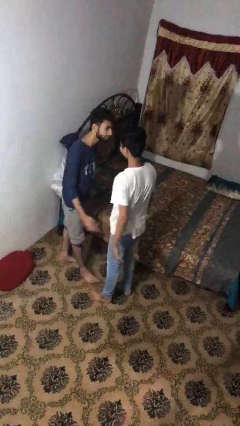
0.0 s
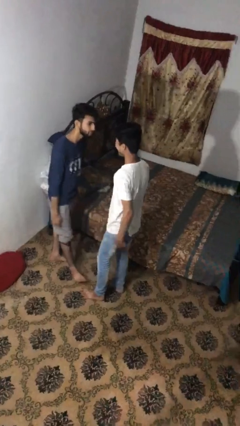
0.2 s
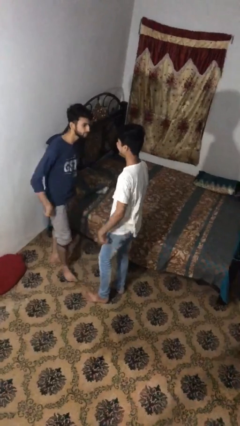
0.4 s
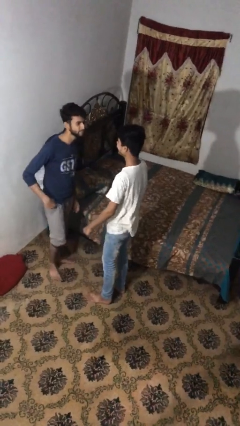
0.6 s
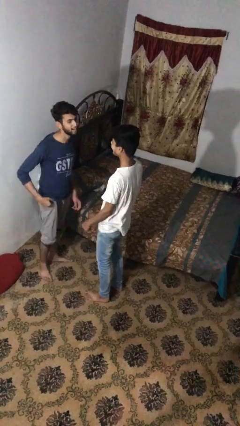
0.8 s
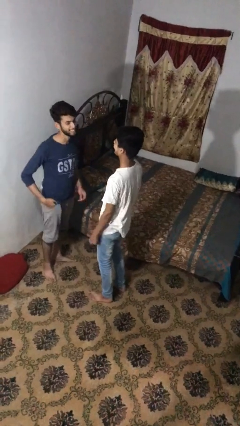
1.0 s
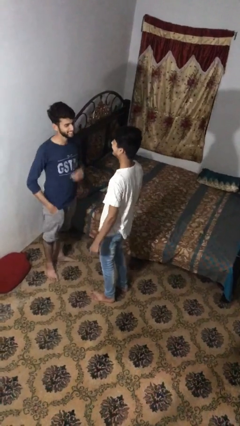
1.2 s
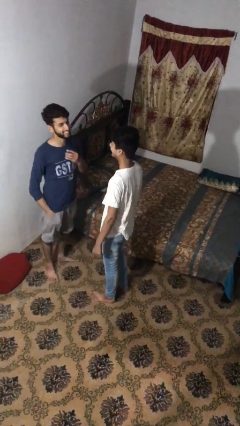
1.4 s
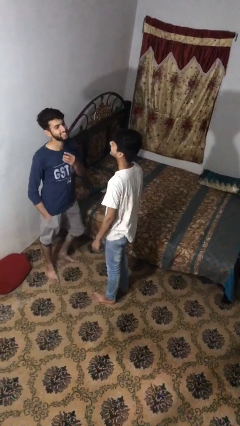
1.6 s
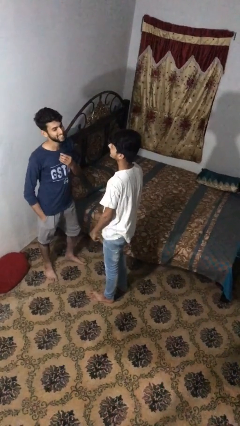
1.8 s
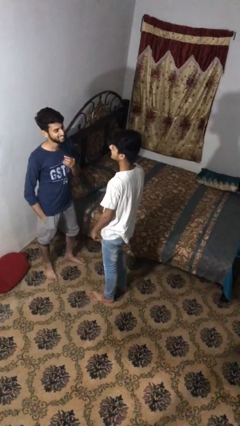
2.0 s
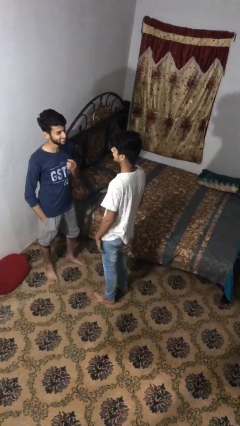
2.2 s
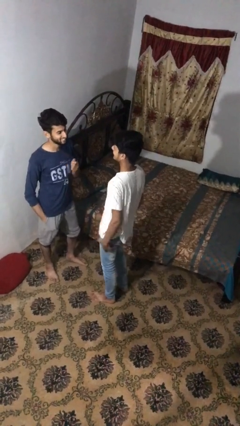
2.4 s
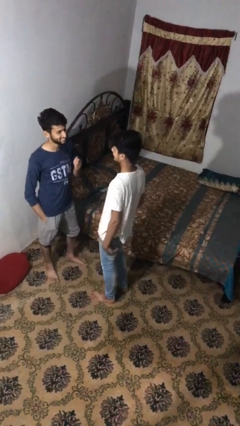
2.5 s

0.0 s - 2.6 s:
person talks to person

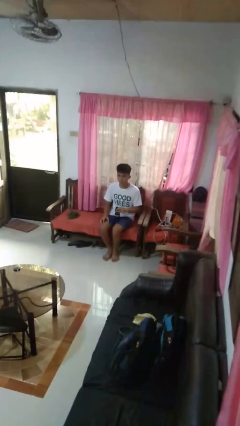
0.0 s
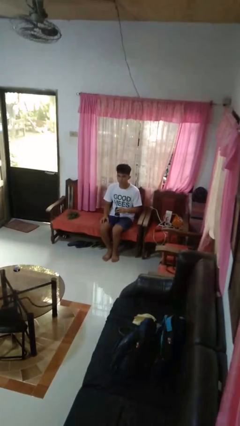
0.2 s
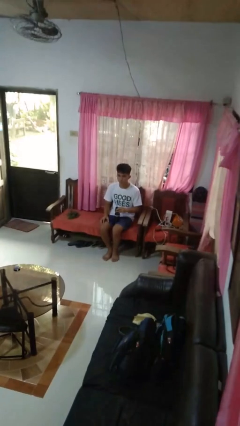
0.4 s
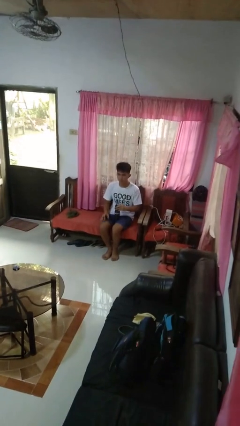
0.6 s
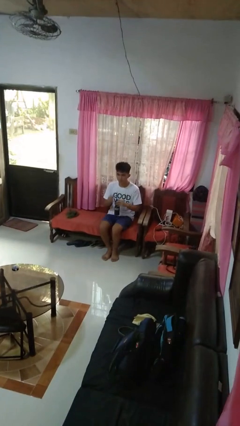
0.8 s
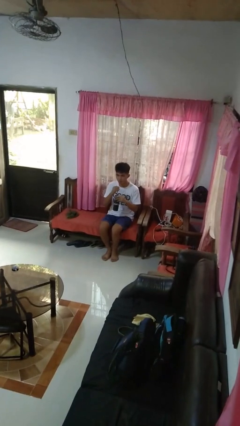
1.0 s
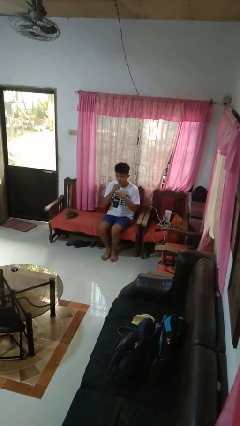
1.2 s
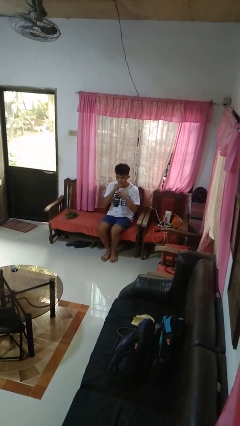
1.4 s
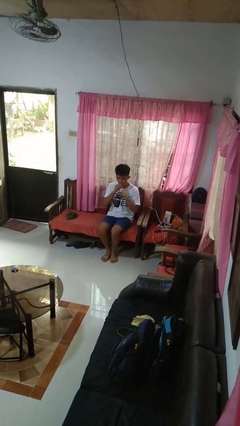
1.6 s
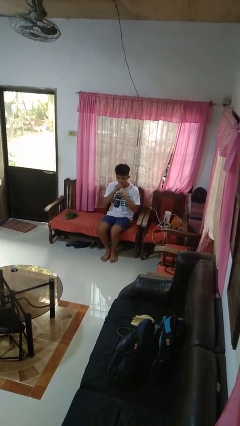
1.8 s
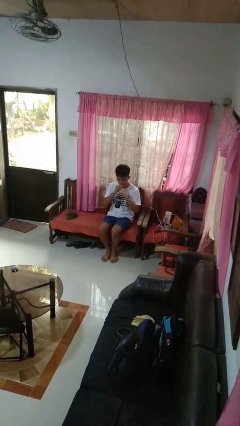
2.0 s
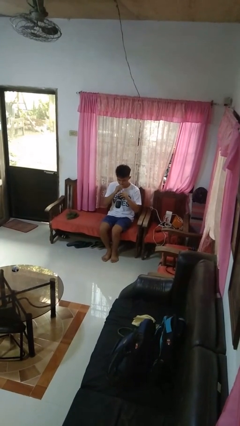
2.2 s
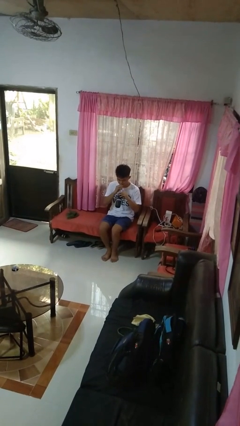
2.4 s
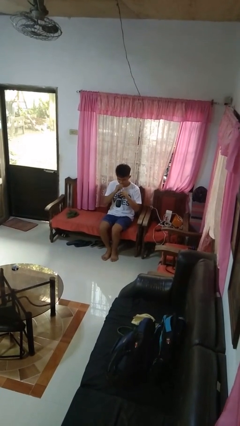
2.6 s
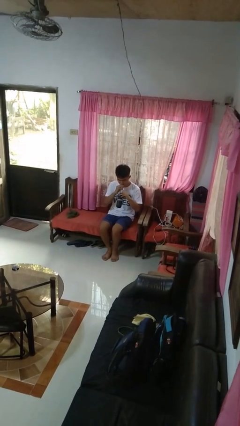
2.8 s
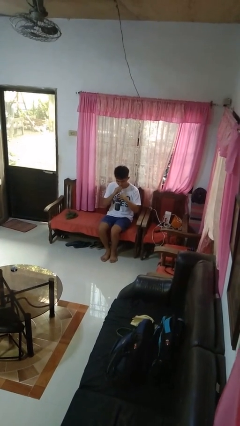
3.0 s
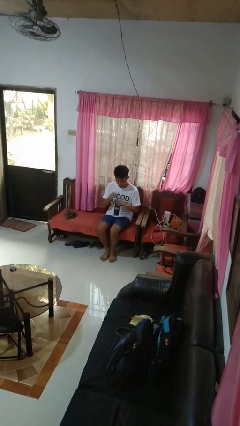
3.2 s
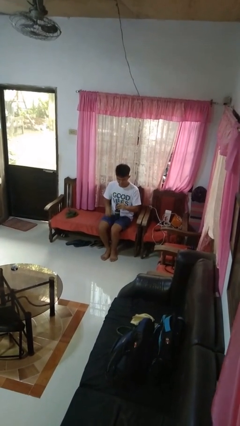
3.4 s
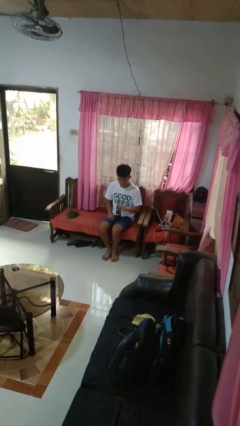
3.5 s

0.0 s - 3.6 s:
person drinks from straw

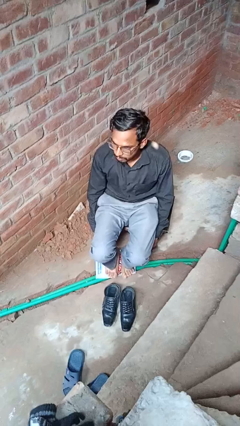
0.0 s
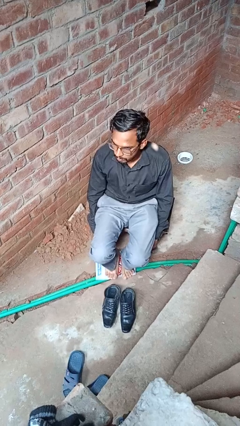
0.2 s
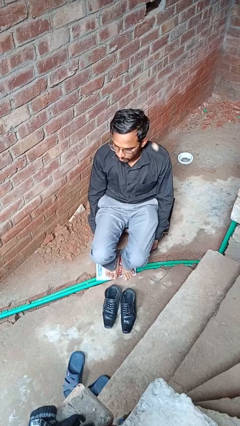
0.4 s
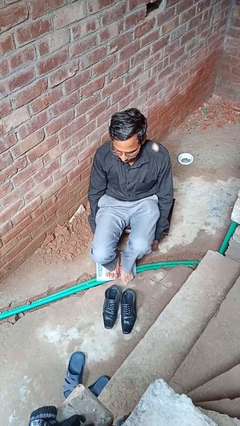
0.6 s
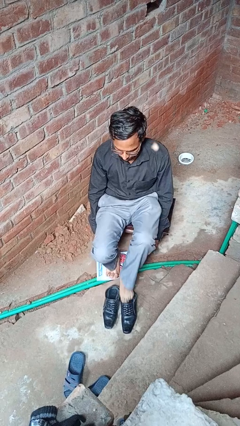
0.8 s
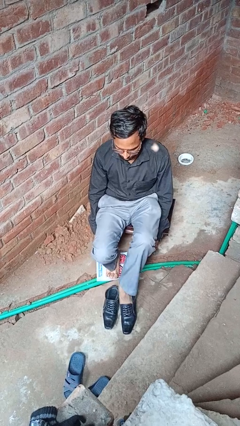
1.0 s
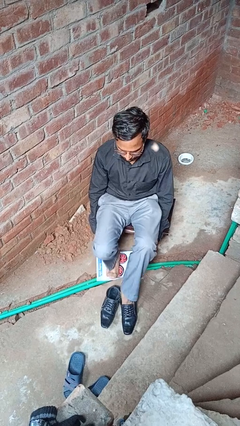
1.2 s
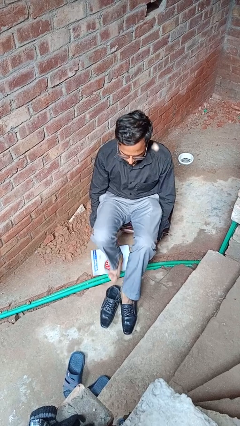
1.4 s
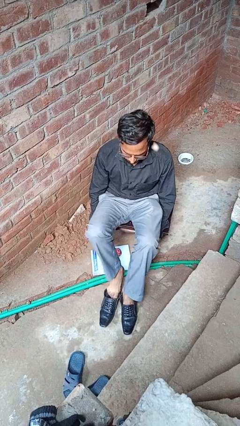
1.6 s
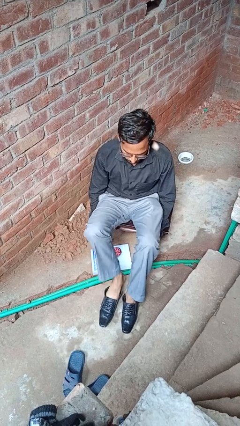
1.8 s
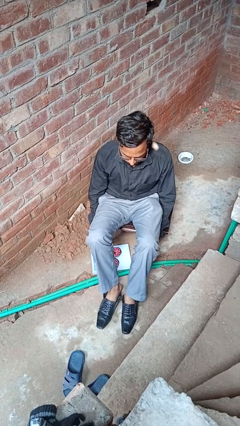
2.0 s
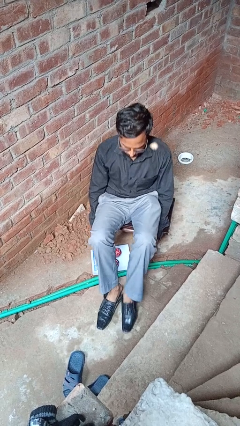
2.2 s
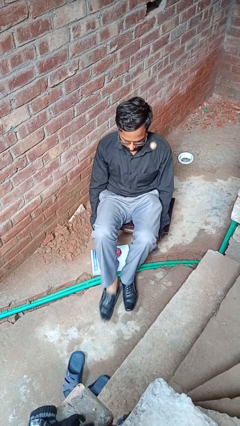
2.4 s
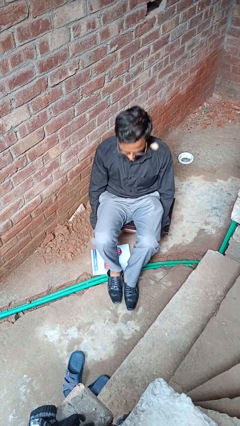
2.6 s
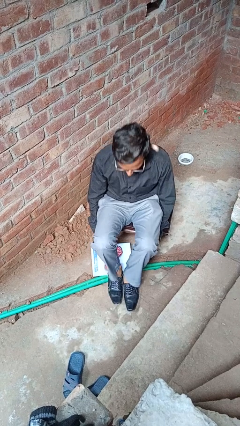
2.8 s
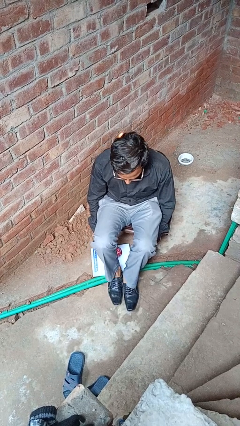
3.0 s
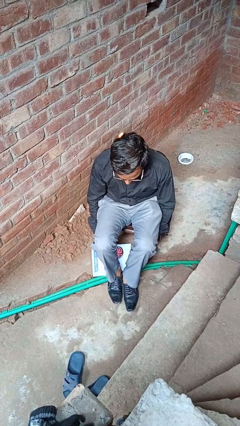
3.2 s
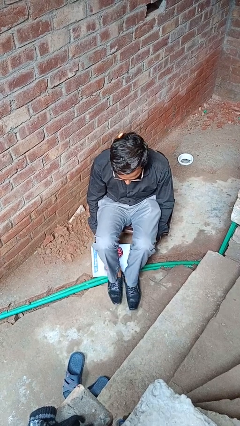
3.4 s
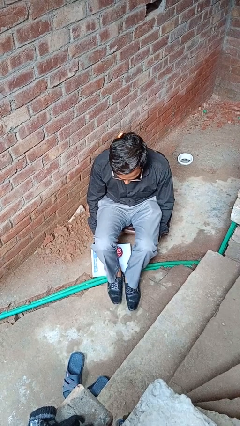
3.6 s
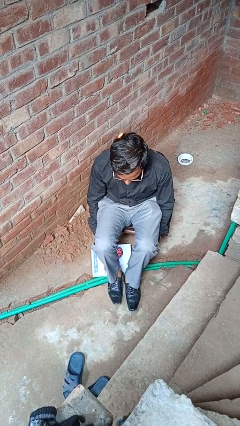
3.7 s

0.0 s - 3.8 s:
person puts on shoes

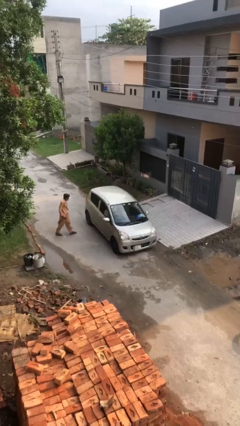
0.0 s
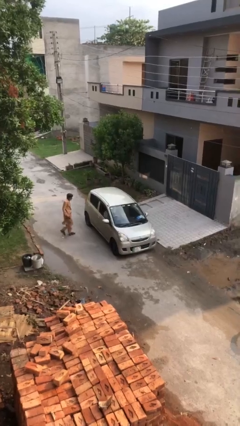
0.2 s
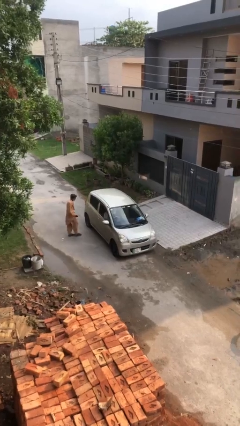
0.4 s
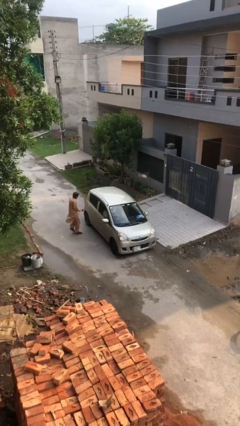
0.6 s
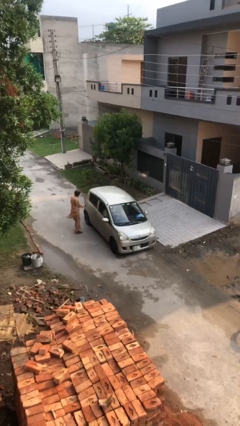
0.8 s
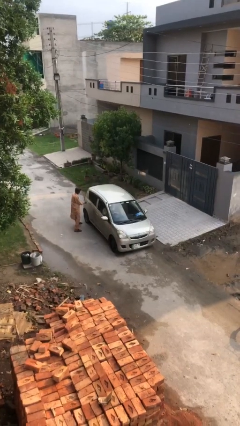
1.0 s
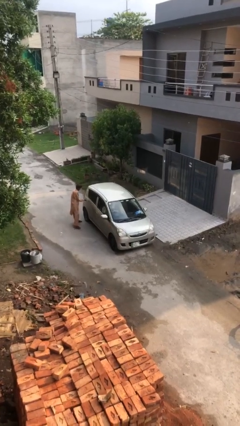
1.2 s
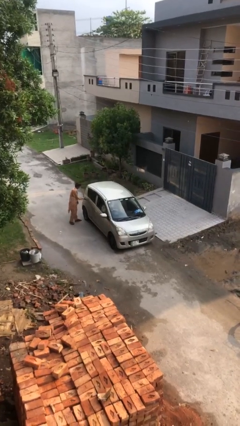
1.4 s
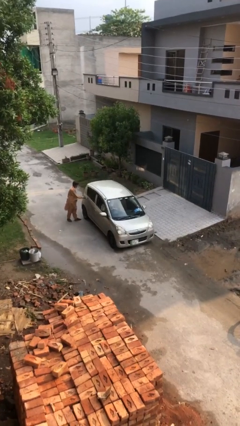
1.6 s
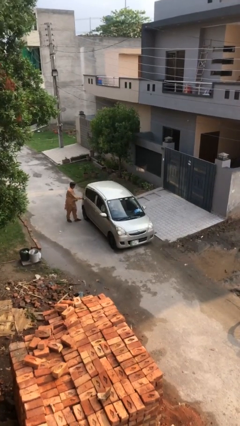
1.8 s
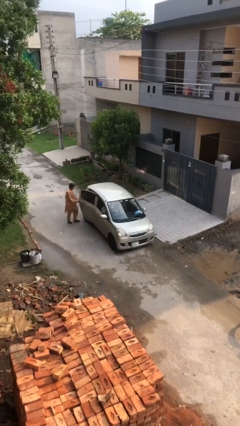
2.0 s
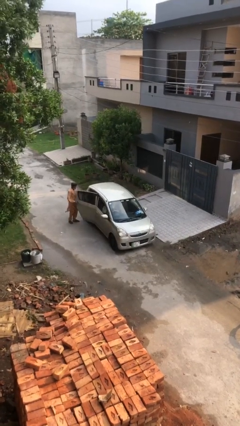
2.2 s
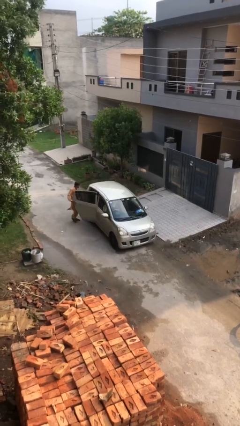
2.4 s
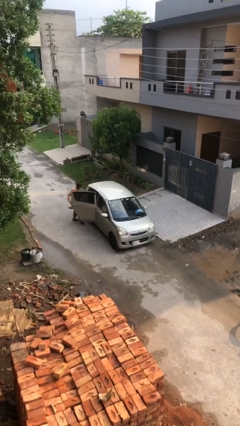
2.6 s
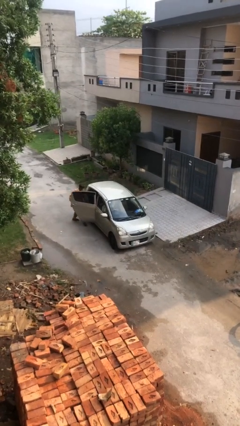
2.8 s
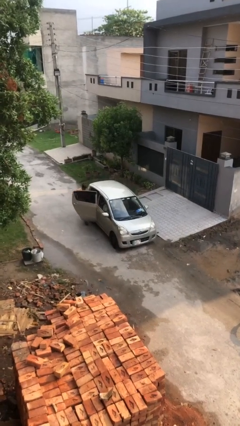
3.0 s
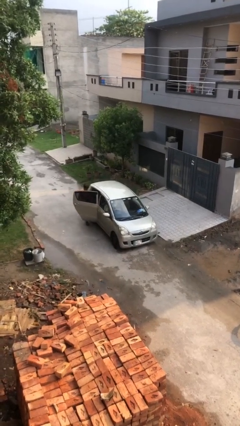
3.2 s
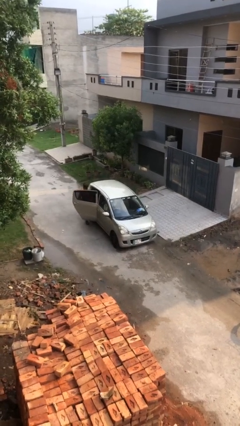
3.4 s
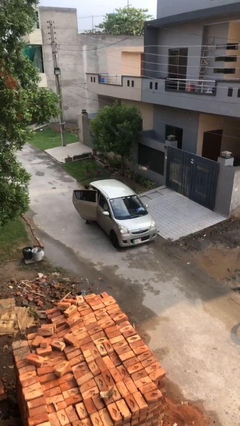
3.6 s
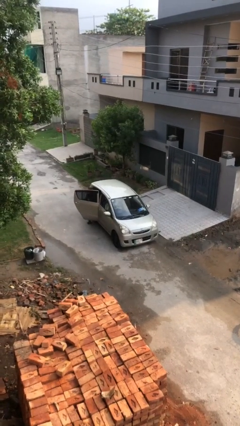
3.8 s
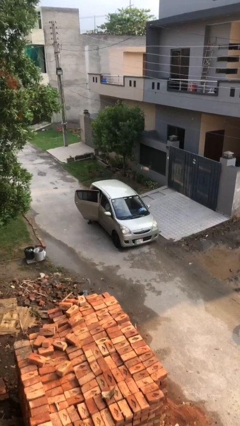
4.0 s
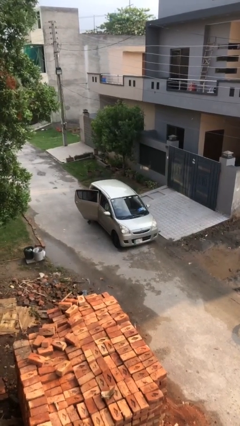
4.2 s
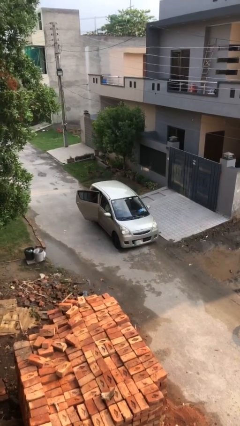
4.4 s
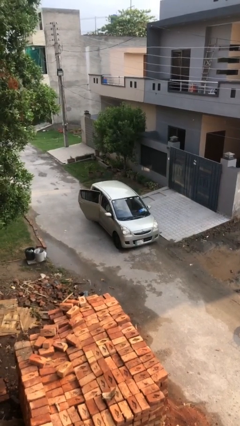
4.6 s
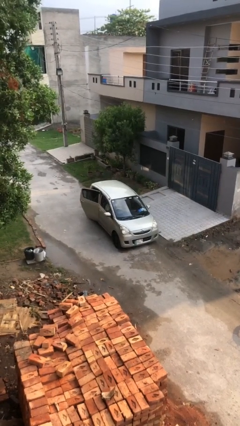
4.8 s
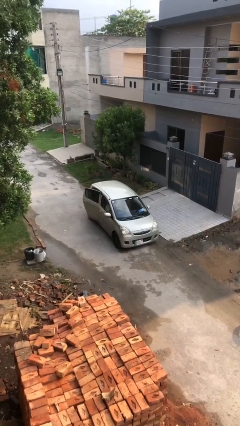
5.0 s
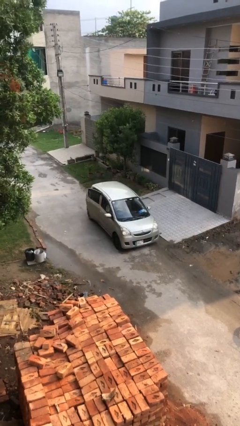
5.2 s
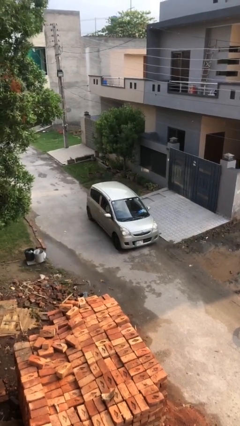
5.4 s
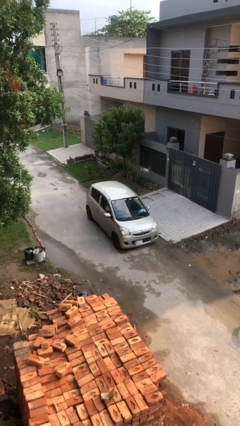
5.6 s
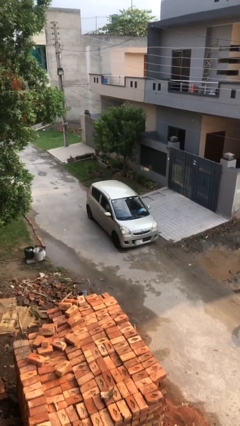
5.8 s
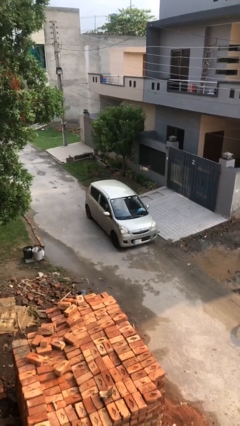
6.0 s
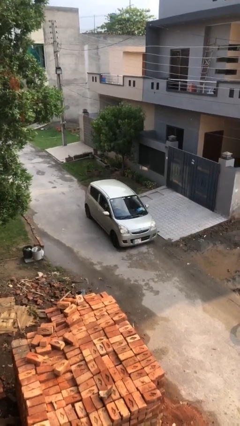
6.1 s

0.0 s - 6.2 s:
car picks up person

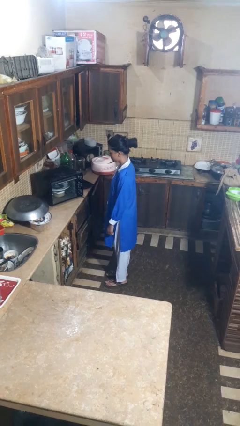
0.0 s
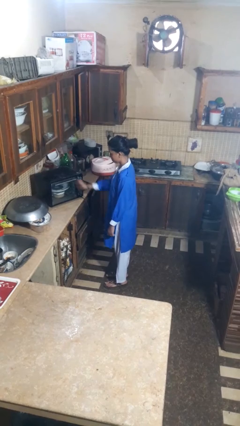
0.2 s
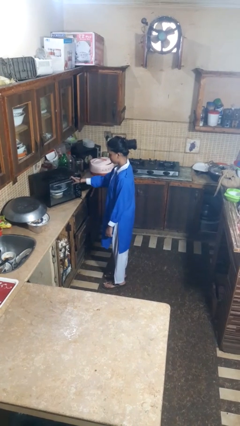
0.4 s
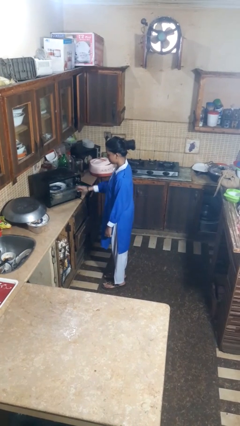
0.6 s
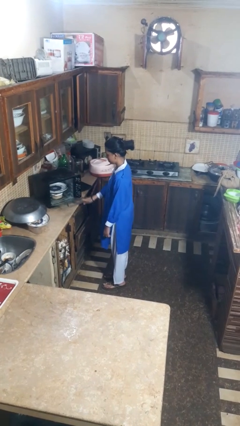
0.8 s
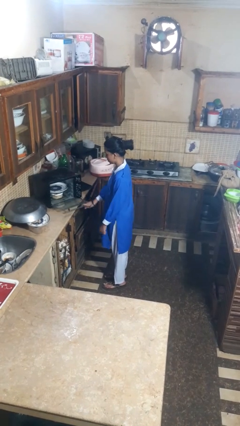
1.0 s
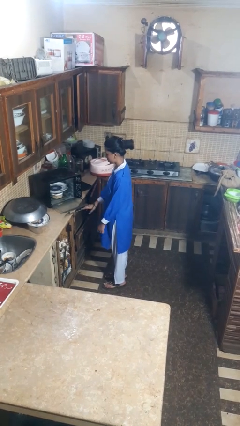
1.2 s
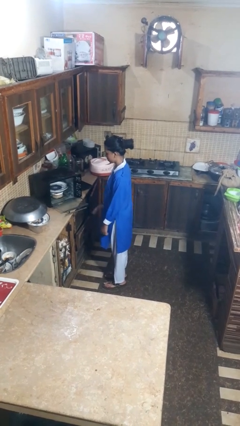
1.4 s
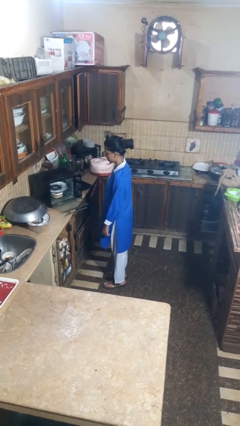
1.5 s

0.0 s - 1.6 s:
person opens dishwasher
